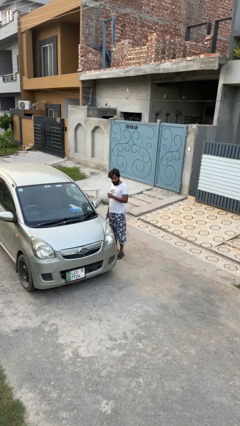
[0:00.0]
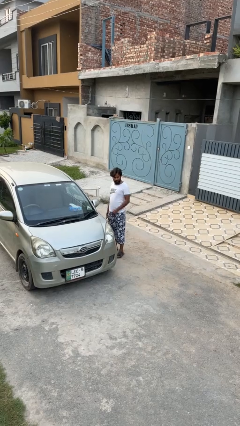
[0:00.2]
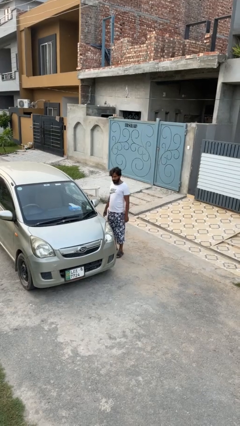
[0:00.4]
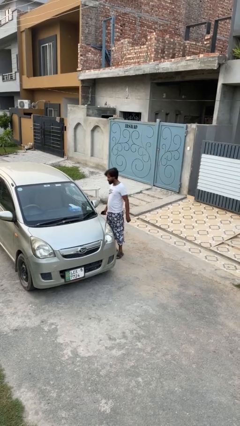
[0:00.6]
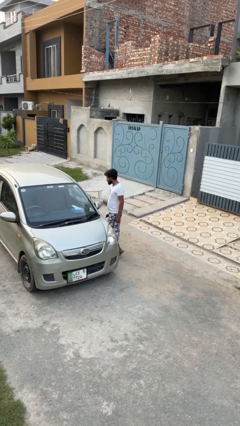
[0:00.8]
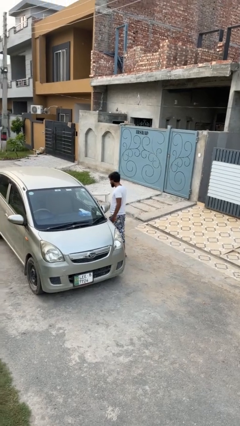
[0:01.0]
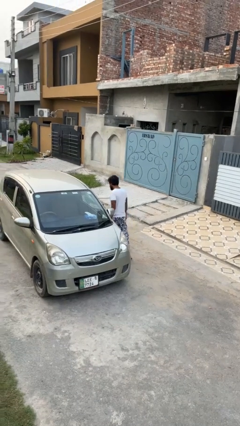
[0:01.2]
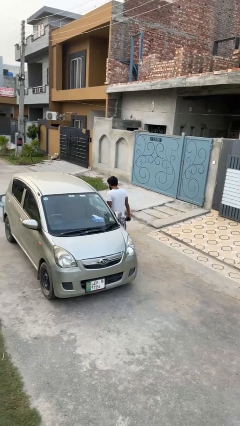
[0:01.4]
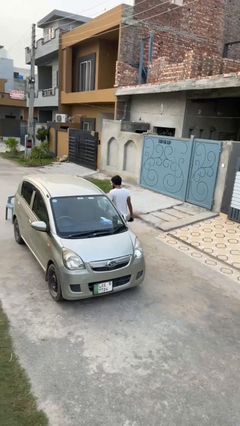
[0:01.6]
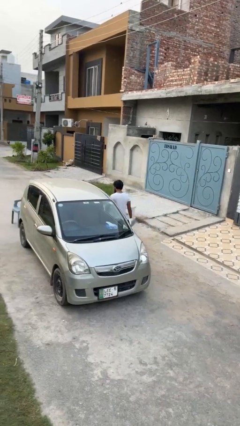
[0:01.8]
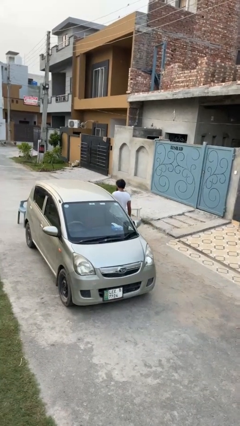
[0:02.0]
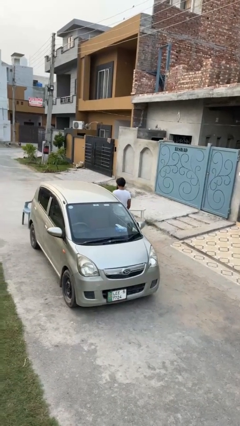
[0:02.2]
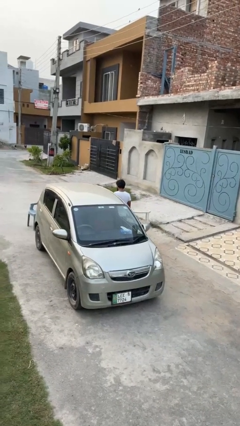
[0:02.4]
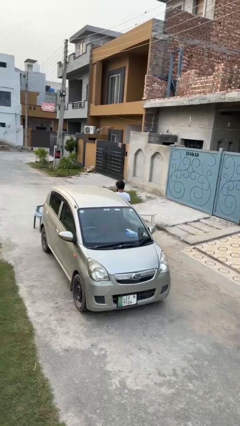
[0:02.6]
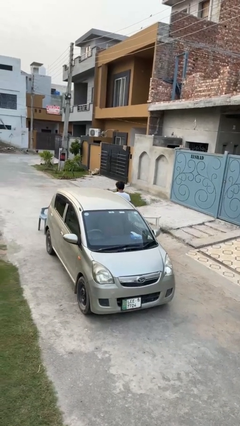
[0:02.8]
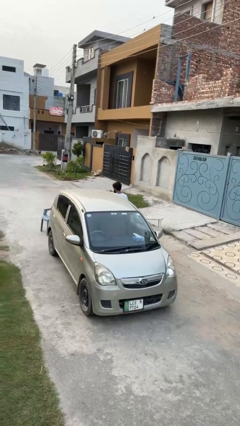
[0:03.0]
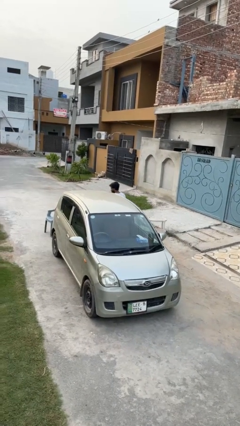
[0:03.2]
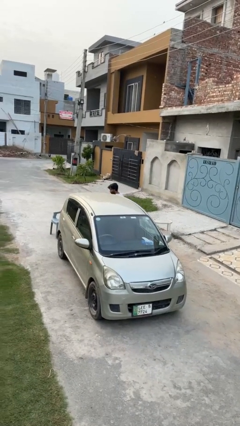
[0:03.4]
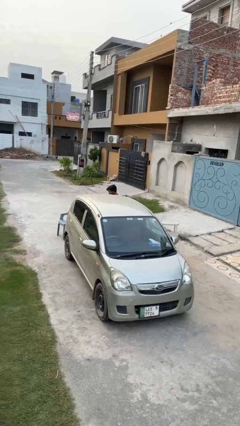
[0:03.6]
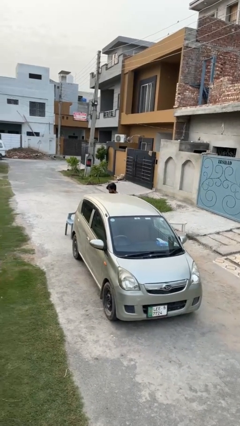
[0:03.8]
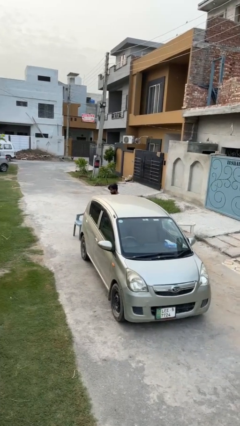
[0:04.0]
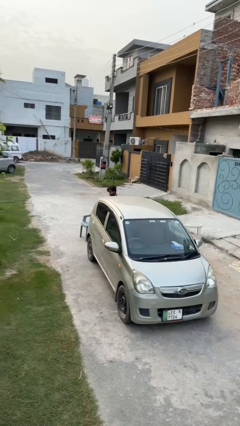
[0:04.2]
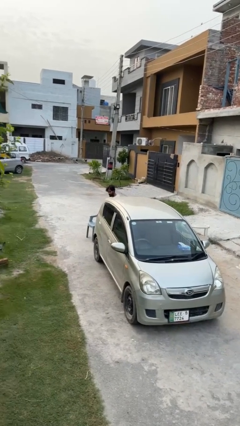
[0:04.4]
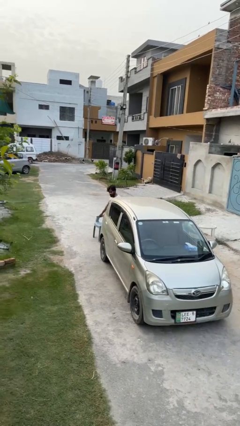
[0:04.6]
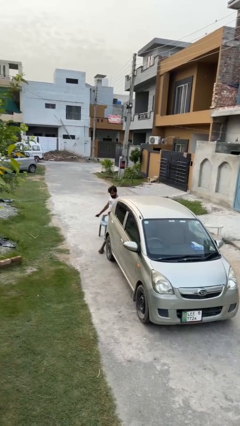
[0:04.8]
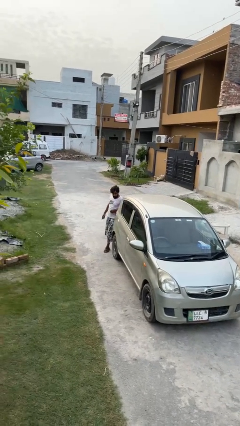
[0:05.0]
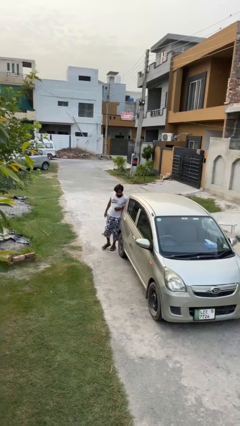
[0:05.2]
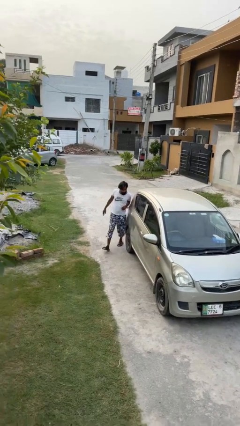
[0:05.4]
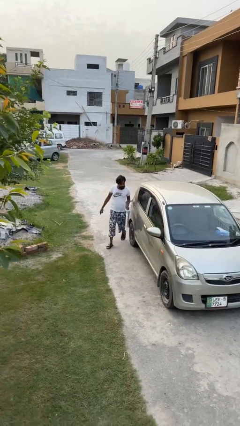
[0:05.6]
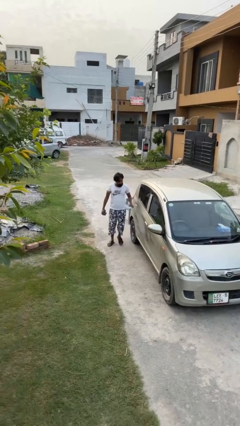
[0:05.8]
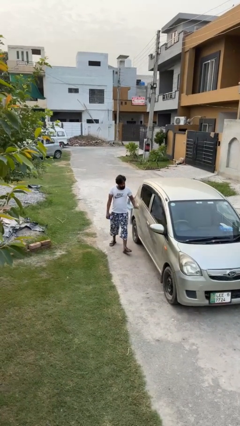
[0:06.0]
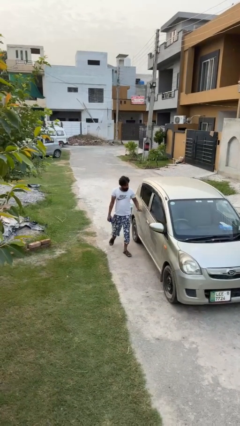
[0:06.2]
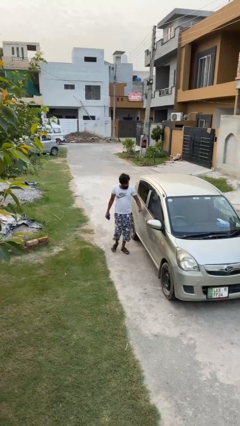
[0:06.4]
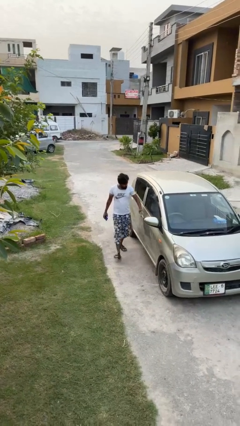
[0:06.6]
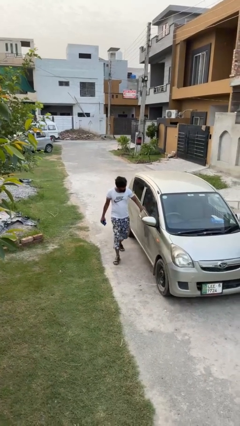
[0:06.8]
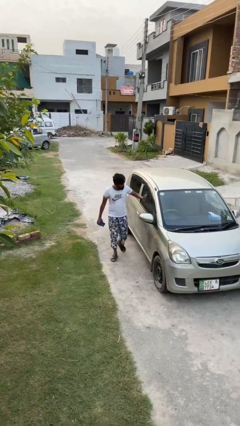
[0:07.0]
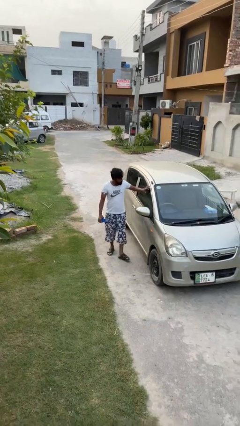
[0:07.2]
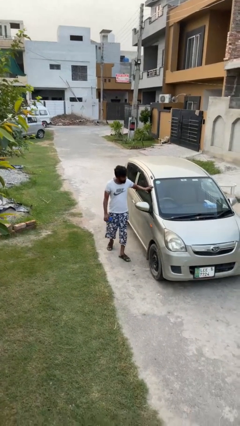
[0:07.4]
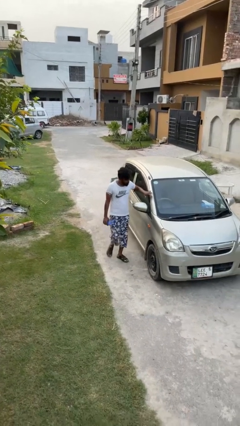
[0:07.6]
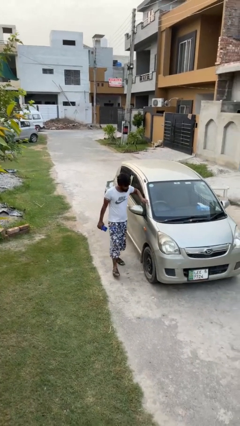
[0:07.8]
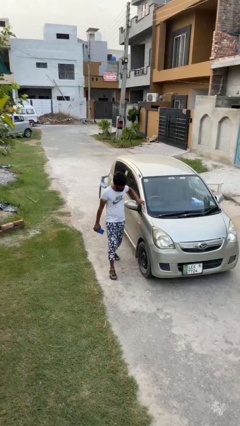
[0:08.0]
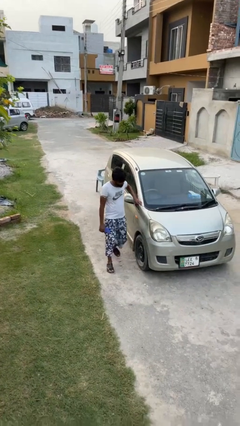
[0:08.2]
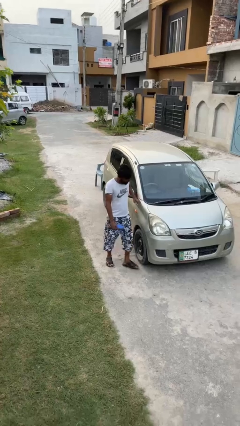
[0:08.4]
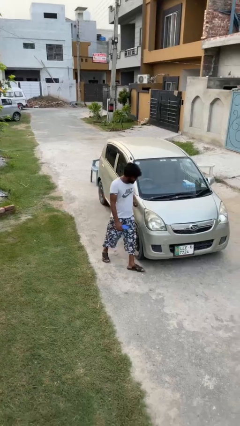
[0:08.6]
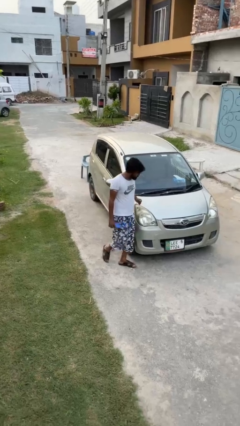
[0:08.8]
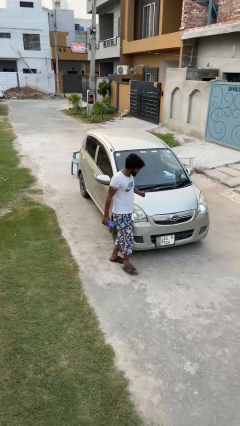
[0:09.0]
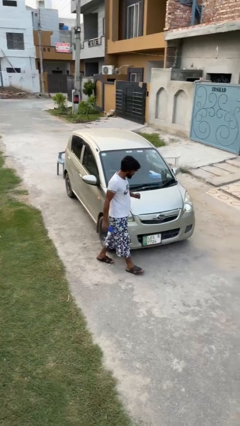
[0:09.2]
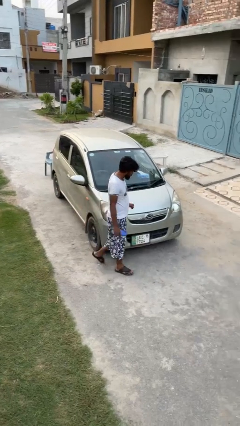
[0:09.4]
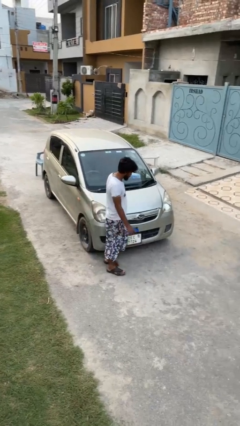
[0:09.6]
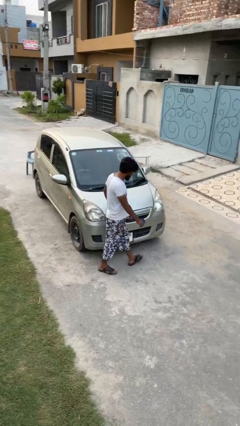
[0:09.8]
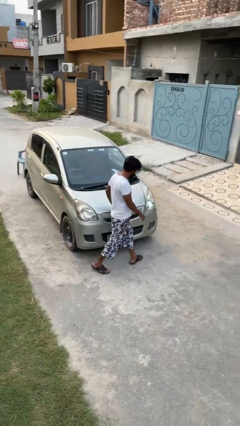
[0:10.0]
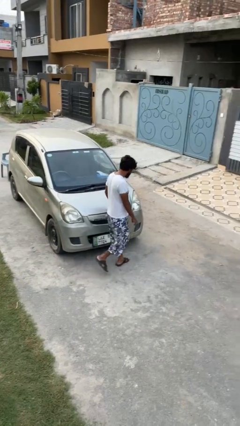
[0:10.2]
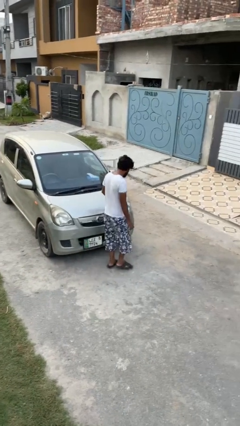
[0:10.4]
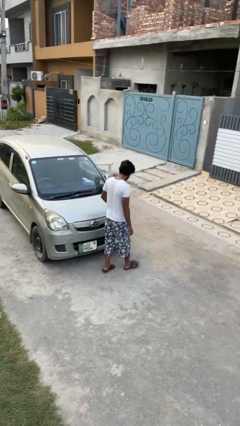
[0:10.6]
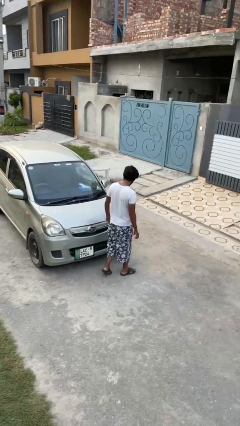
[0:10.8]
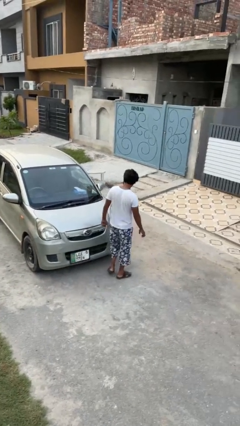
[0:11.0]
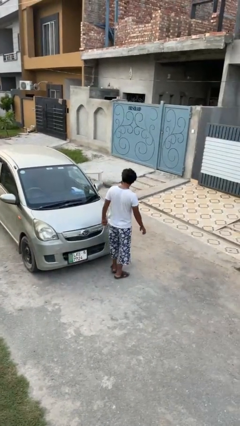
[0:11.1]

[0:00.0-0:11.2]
person walks around car

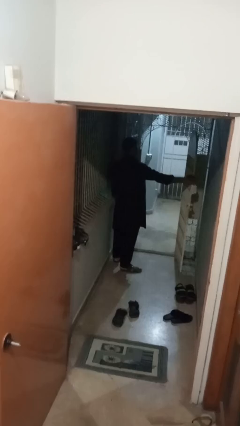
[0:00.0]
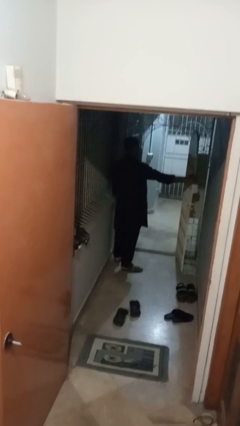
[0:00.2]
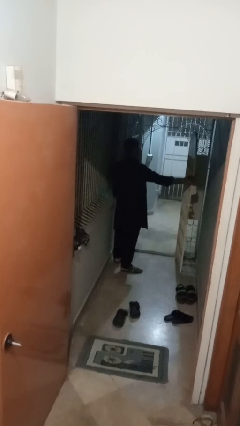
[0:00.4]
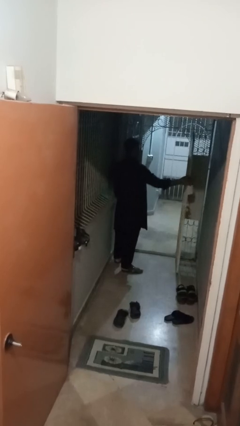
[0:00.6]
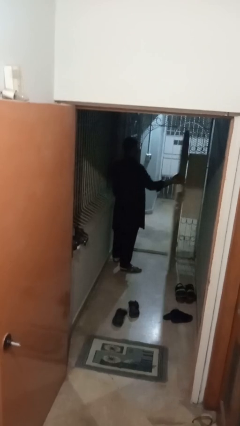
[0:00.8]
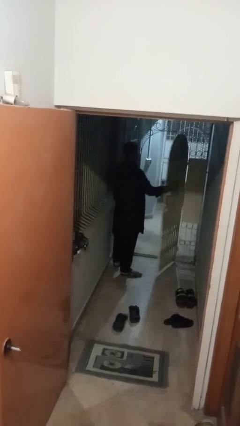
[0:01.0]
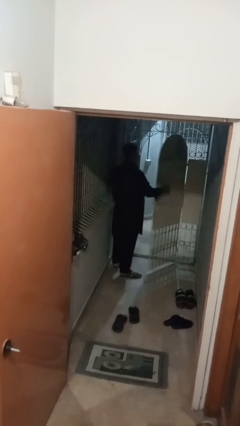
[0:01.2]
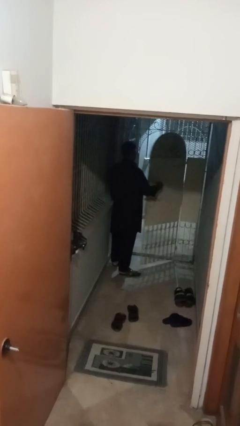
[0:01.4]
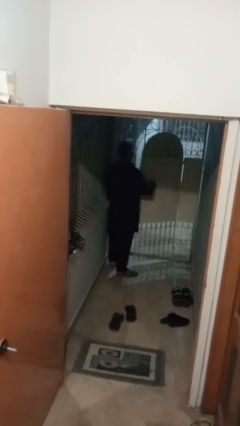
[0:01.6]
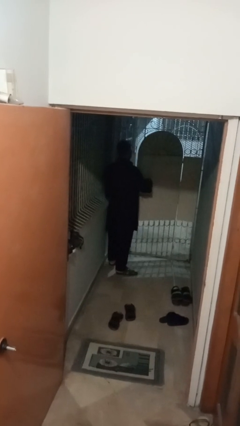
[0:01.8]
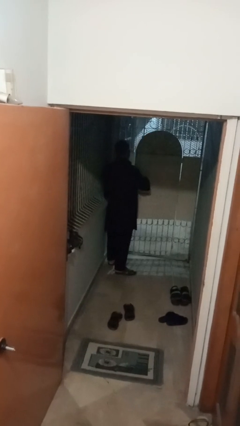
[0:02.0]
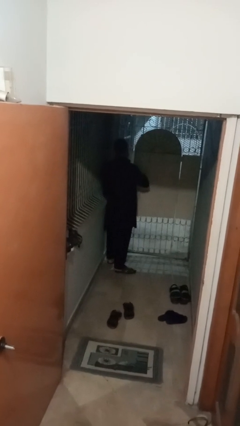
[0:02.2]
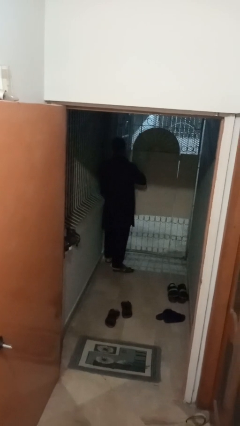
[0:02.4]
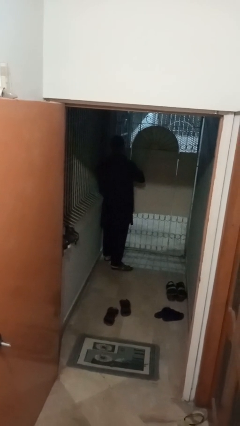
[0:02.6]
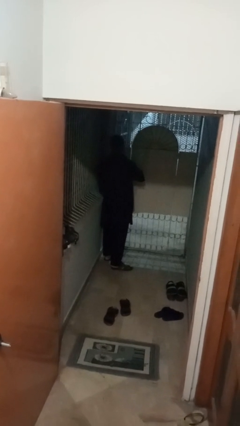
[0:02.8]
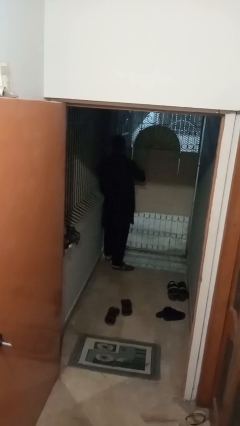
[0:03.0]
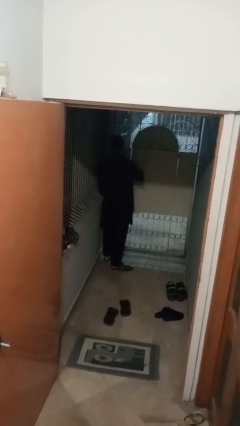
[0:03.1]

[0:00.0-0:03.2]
person closes gate

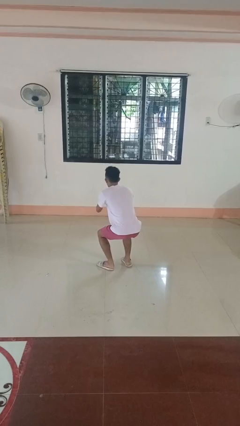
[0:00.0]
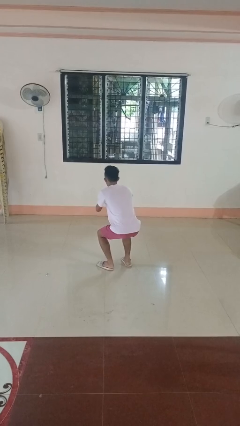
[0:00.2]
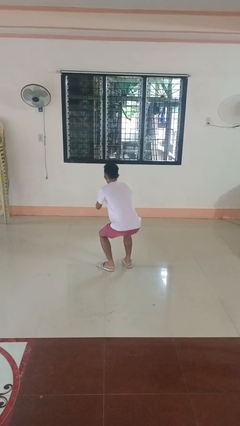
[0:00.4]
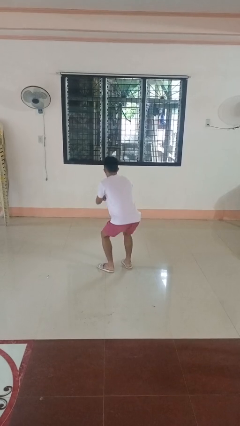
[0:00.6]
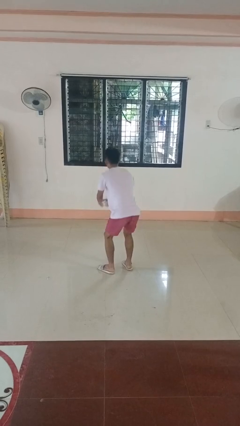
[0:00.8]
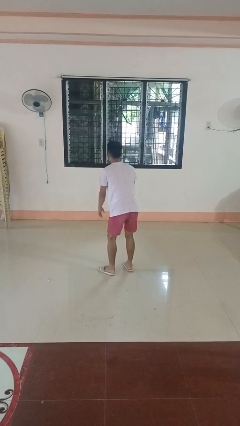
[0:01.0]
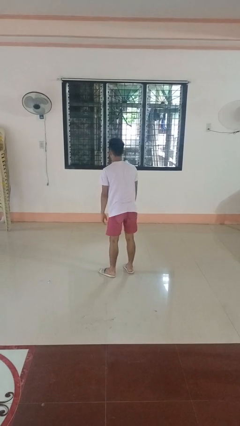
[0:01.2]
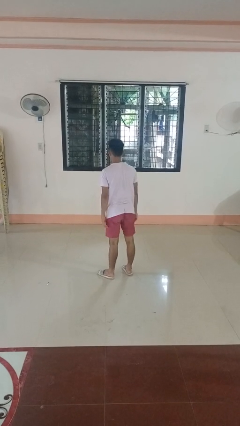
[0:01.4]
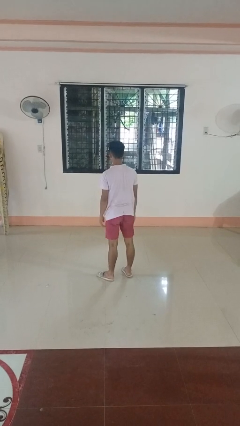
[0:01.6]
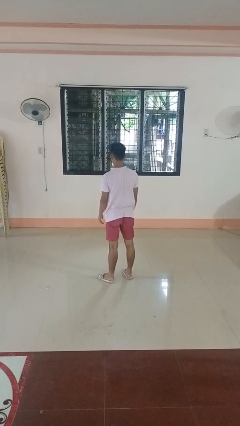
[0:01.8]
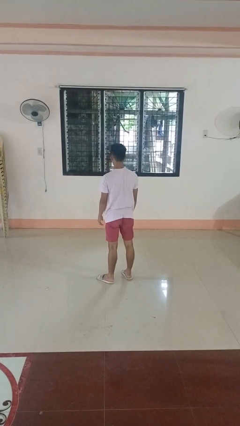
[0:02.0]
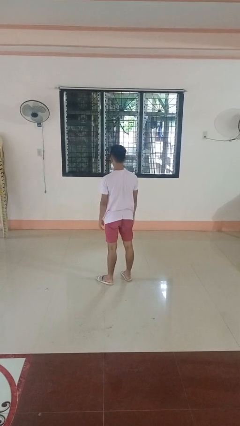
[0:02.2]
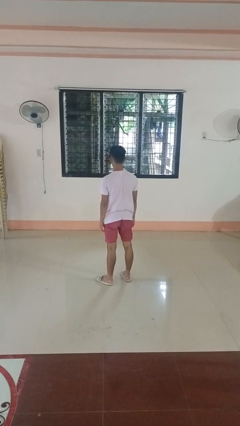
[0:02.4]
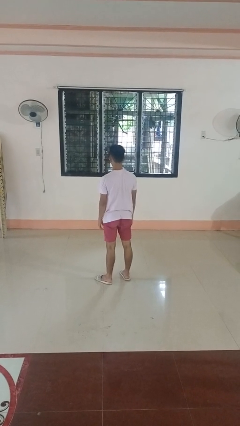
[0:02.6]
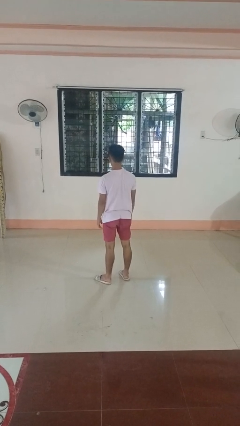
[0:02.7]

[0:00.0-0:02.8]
person stands up

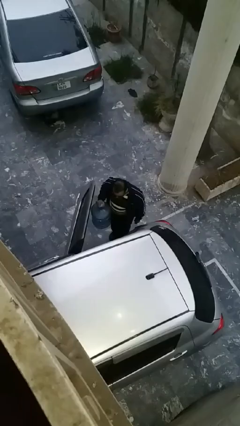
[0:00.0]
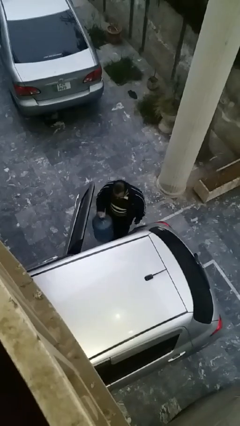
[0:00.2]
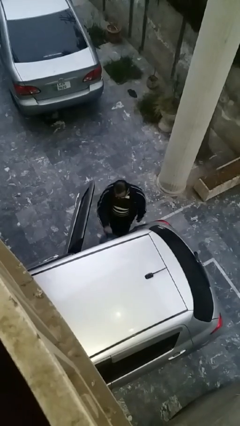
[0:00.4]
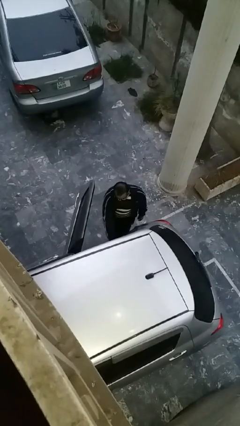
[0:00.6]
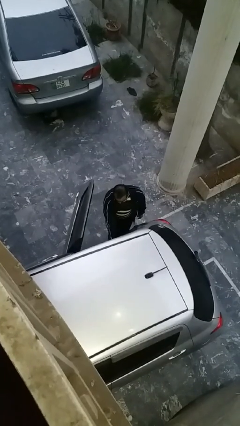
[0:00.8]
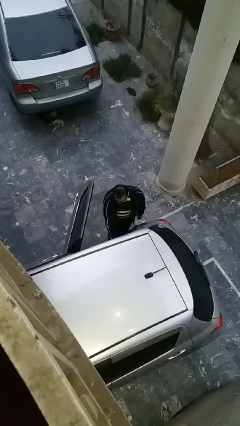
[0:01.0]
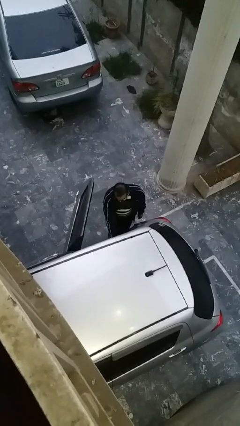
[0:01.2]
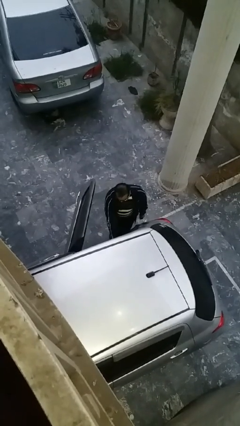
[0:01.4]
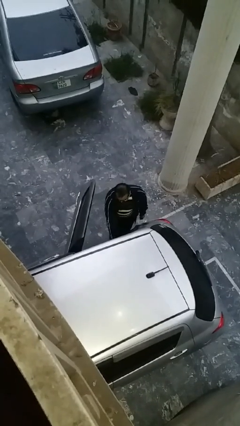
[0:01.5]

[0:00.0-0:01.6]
person loads car
